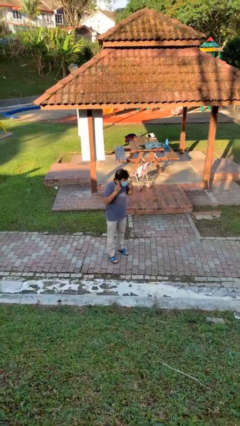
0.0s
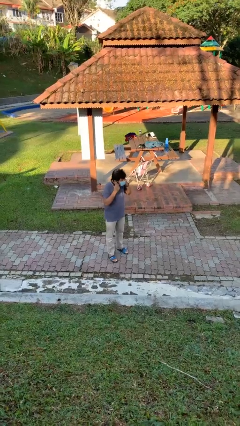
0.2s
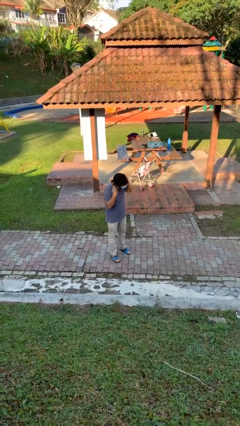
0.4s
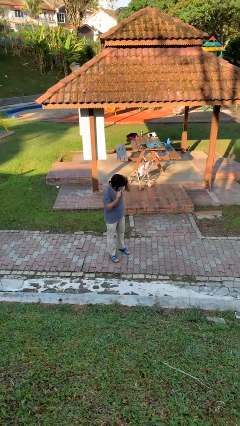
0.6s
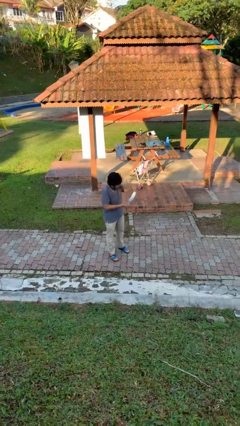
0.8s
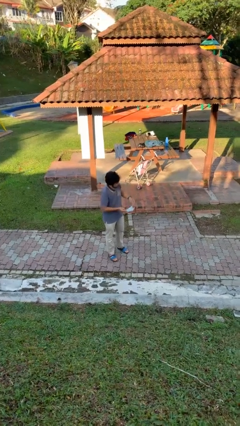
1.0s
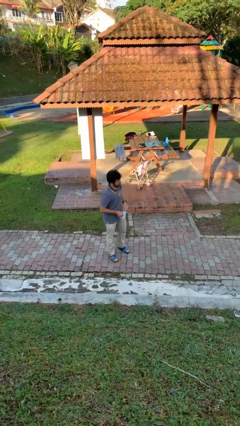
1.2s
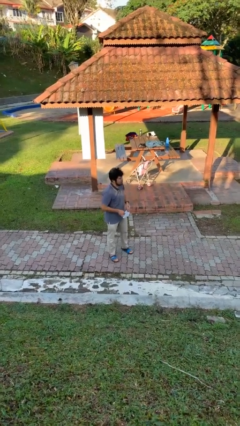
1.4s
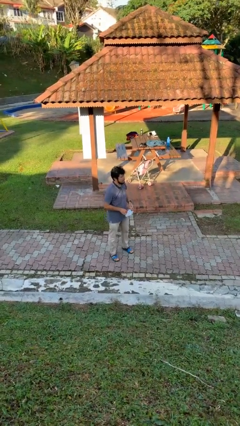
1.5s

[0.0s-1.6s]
person takes off facemask

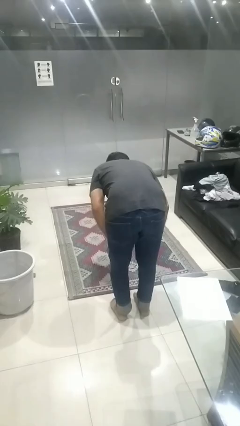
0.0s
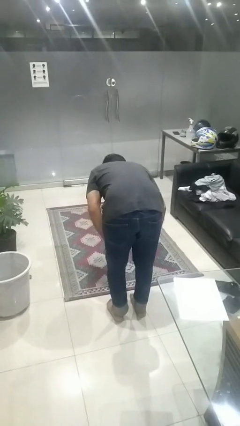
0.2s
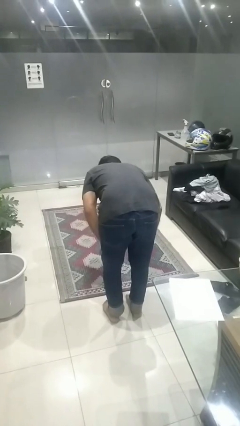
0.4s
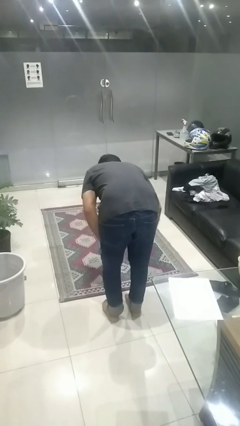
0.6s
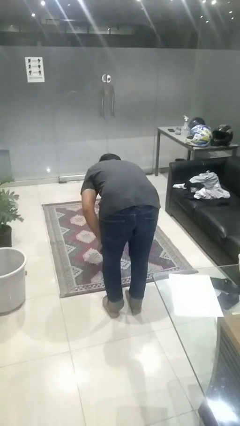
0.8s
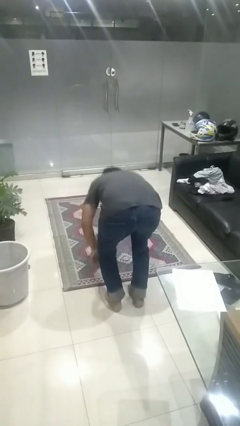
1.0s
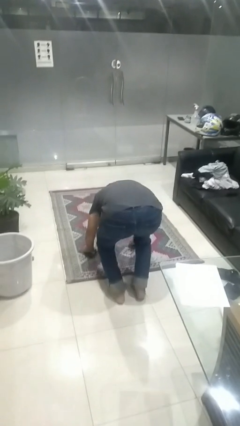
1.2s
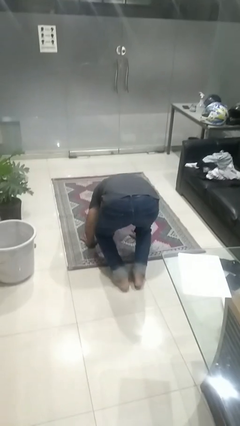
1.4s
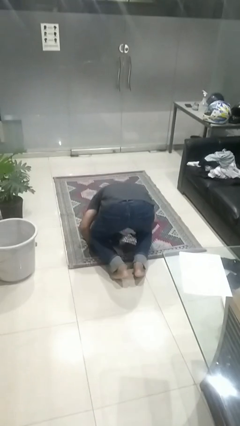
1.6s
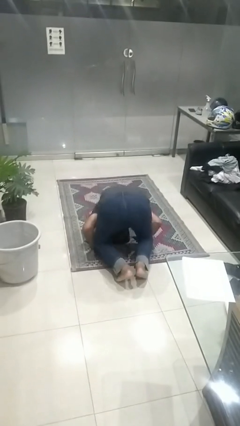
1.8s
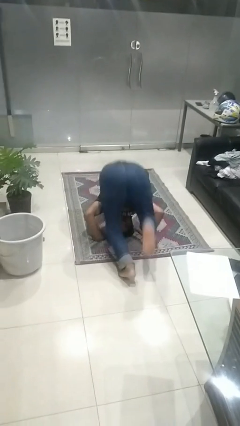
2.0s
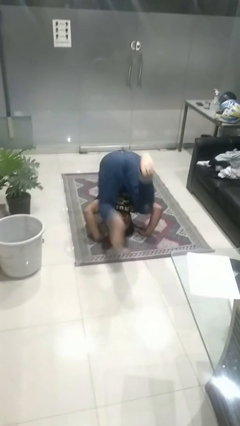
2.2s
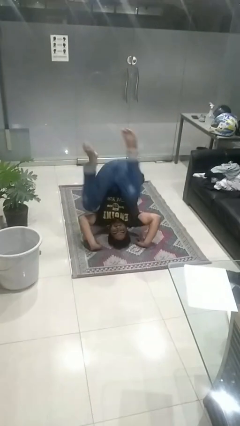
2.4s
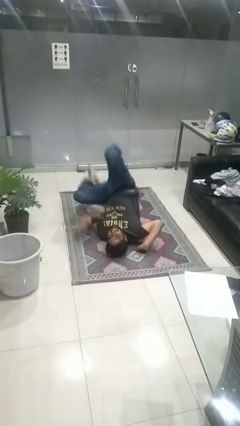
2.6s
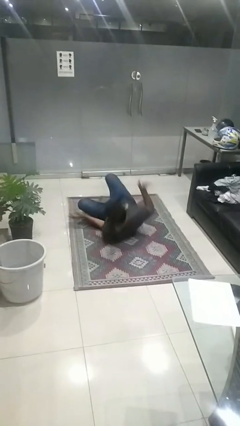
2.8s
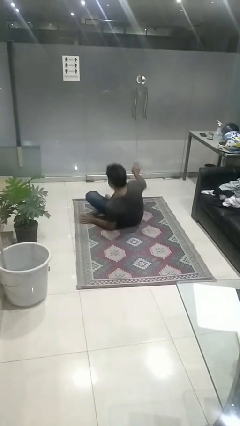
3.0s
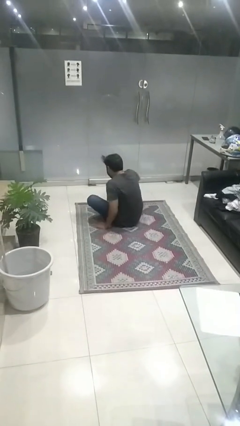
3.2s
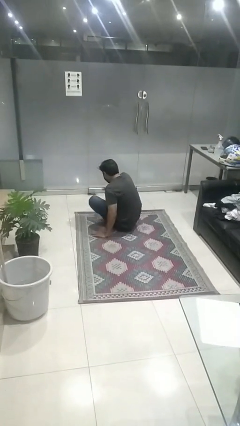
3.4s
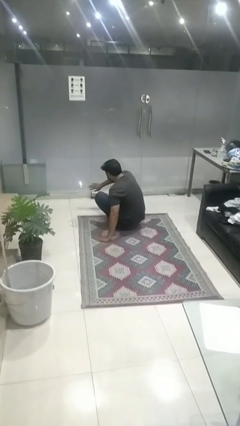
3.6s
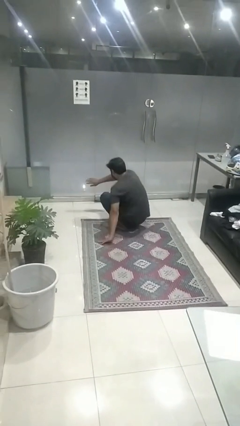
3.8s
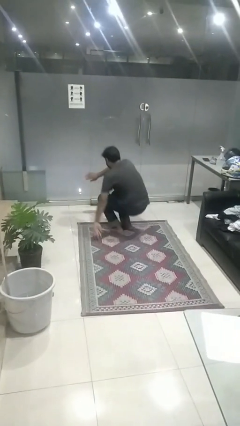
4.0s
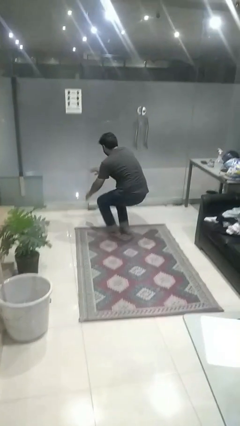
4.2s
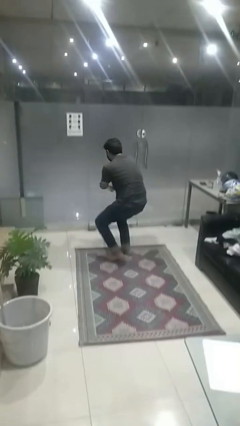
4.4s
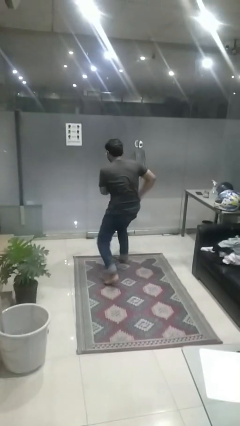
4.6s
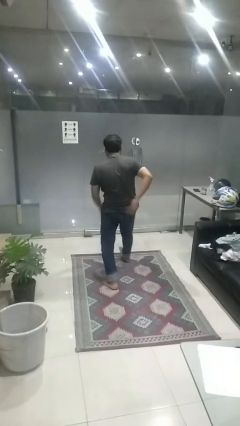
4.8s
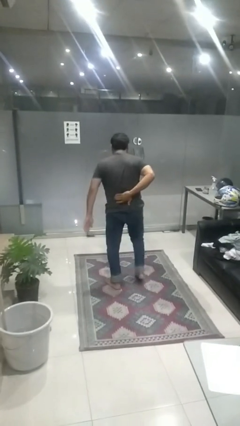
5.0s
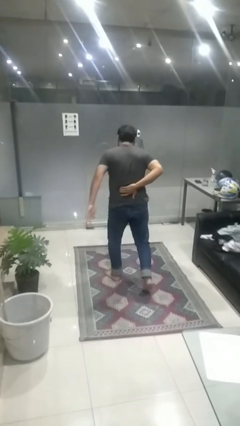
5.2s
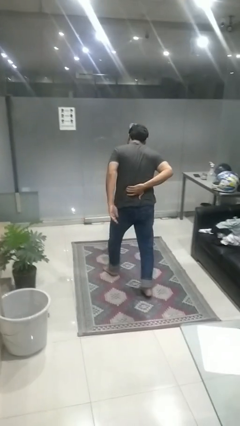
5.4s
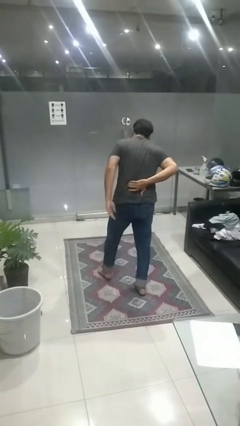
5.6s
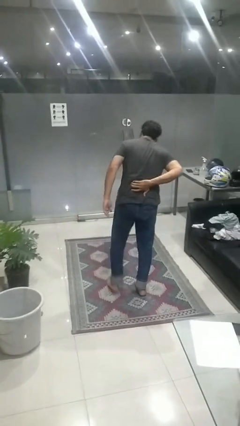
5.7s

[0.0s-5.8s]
person somersaults

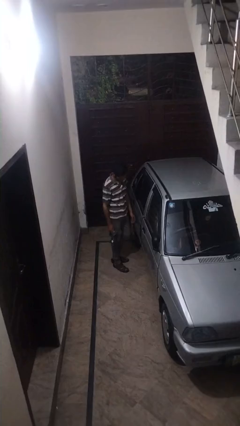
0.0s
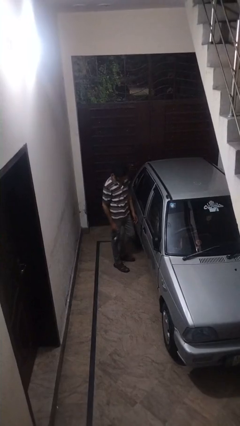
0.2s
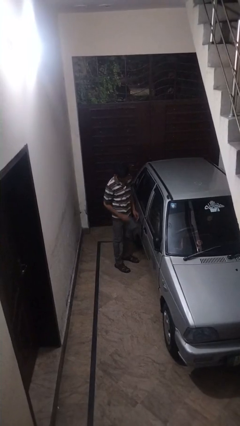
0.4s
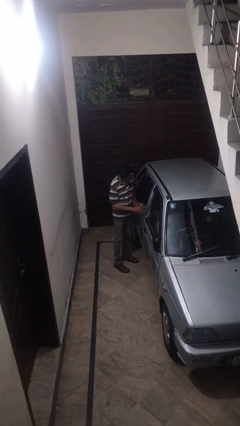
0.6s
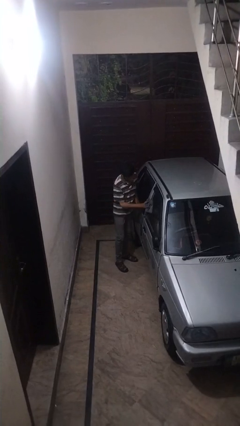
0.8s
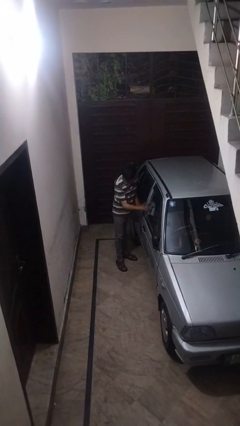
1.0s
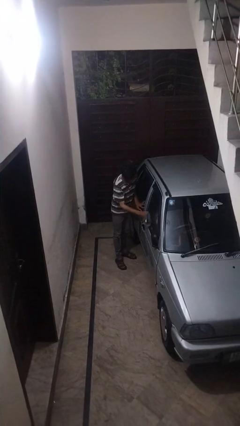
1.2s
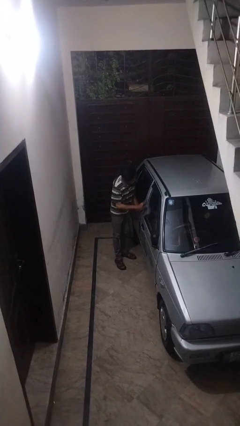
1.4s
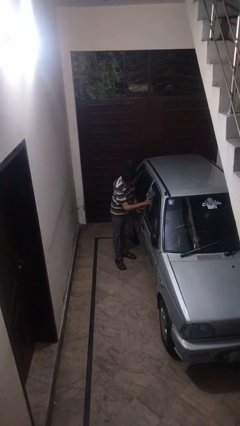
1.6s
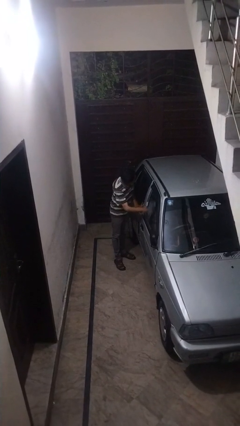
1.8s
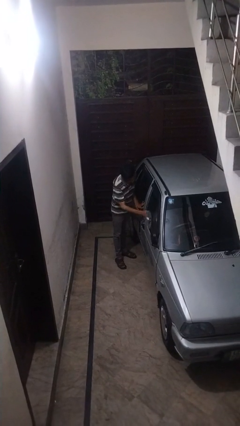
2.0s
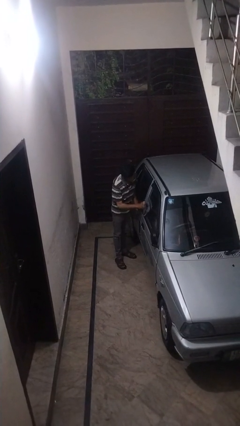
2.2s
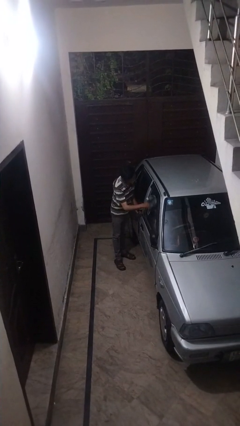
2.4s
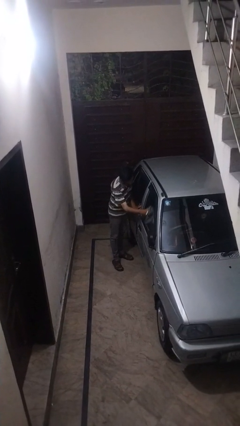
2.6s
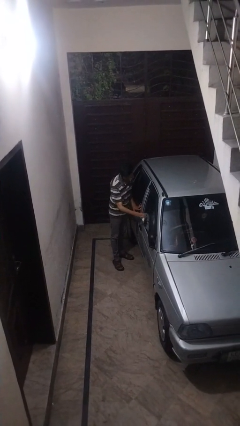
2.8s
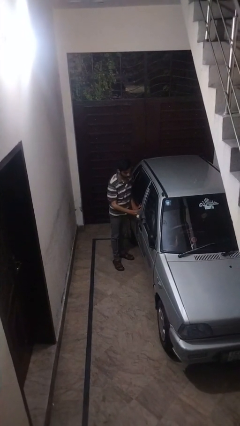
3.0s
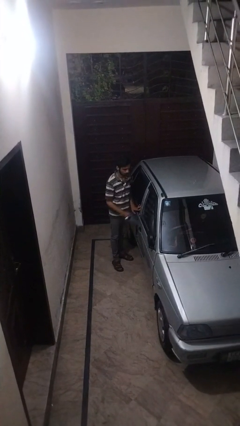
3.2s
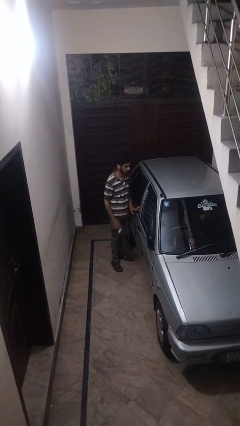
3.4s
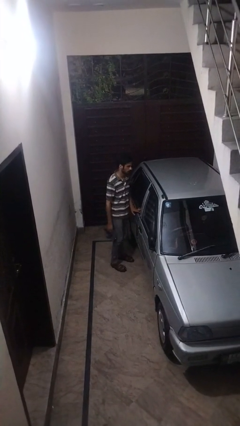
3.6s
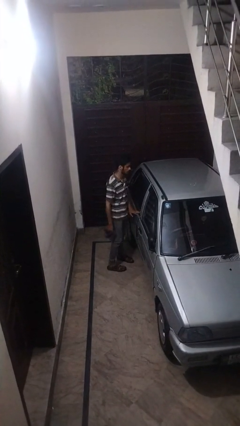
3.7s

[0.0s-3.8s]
person polishes car with rag

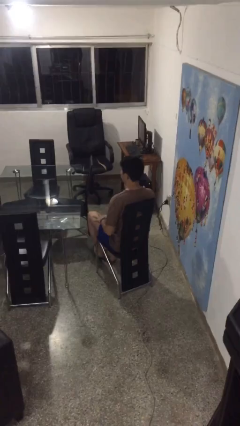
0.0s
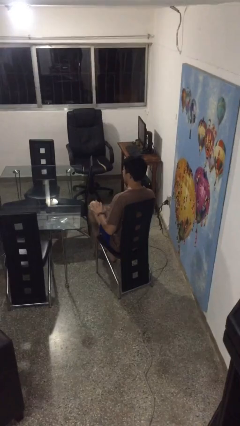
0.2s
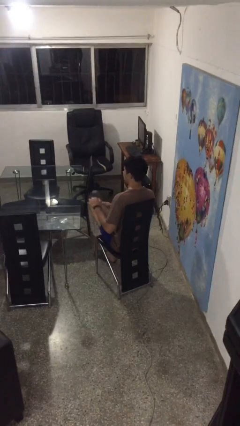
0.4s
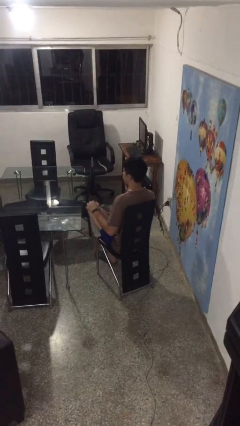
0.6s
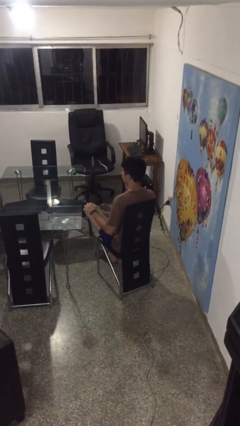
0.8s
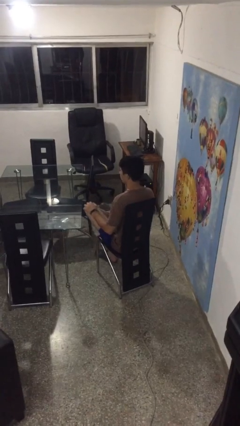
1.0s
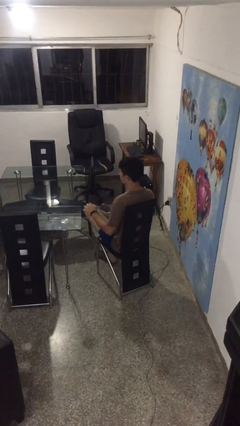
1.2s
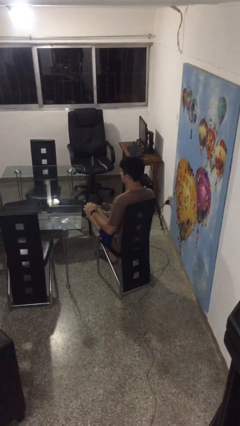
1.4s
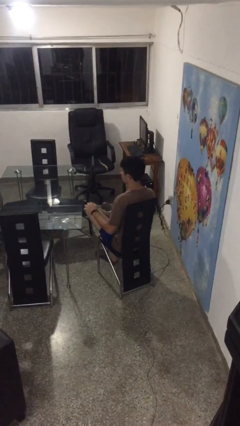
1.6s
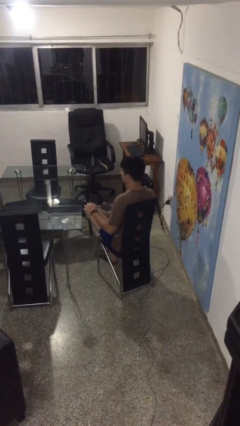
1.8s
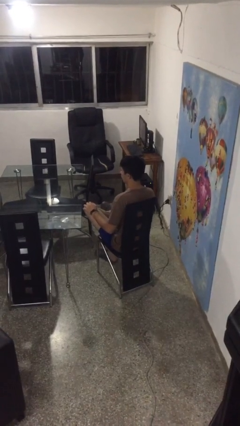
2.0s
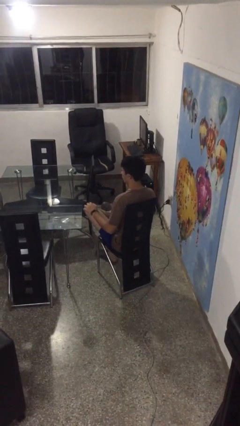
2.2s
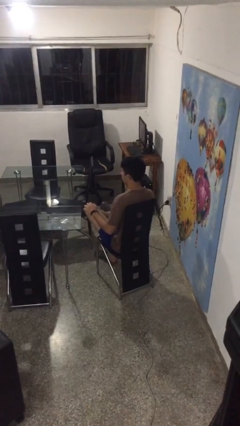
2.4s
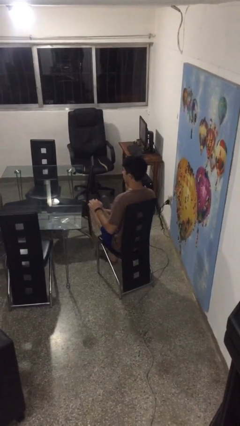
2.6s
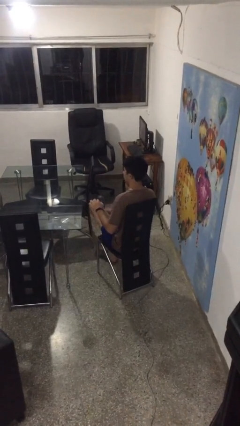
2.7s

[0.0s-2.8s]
person crosses legs

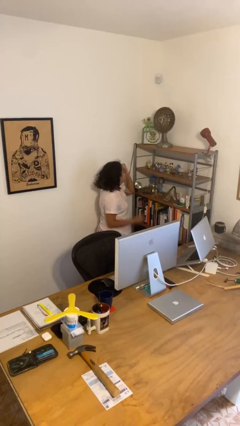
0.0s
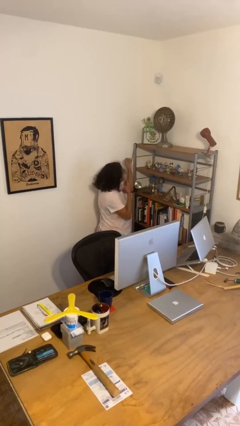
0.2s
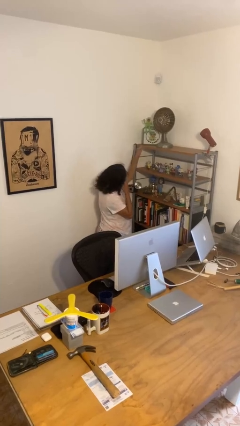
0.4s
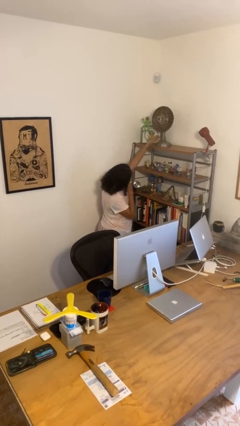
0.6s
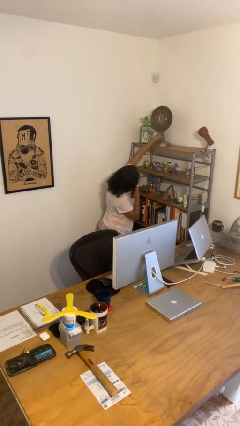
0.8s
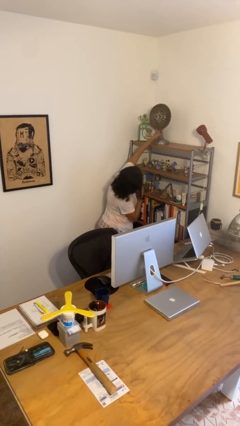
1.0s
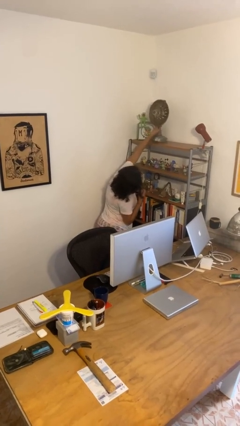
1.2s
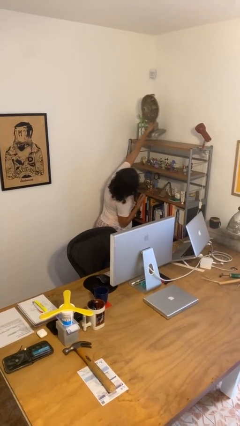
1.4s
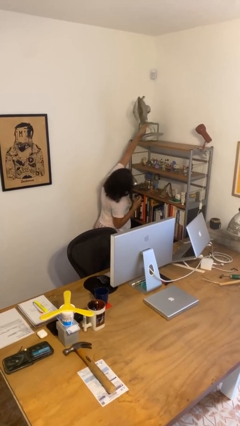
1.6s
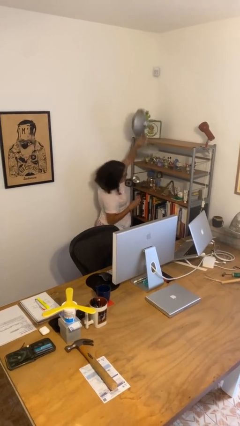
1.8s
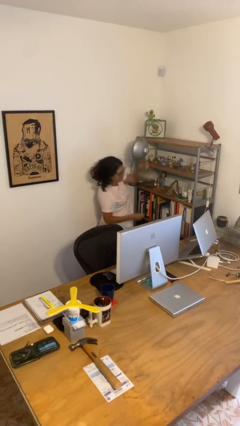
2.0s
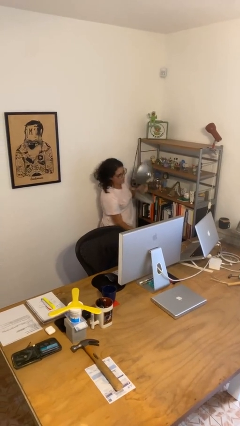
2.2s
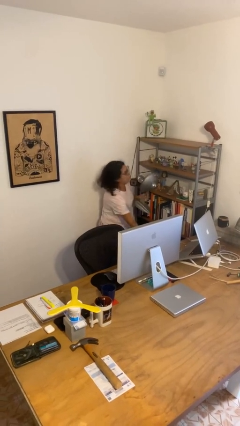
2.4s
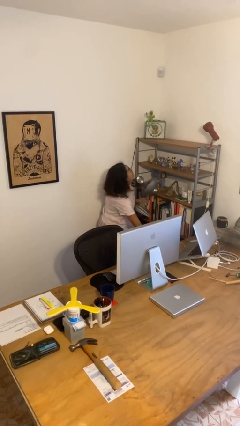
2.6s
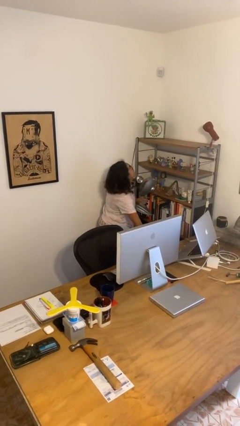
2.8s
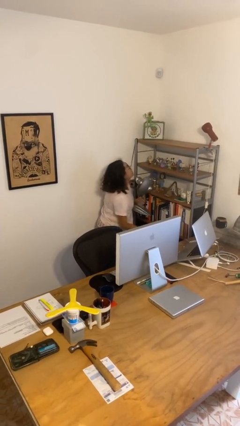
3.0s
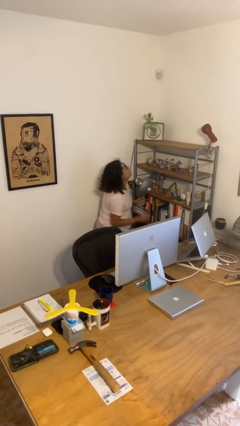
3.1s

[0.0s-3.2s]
person picks up object from shelf

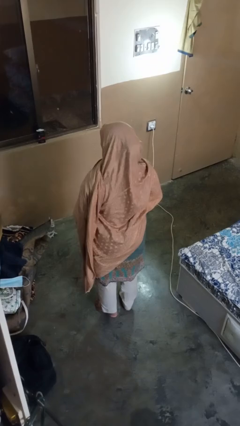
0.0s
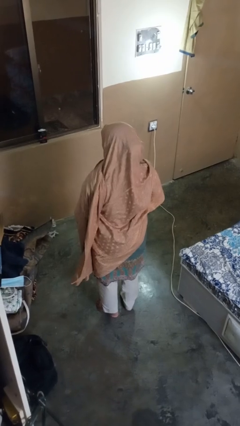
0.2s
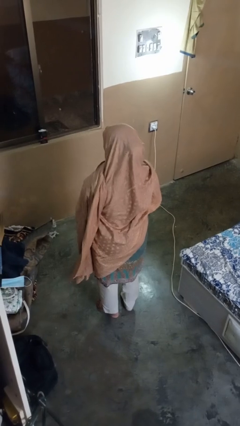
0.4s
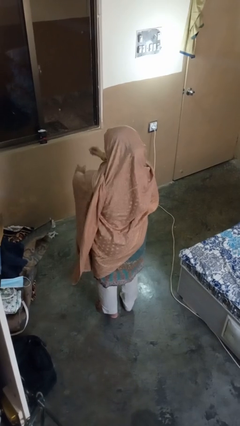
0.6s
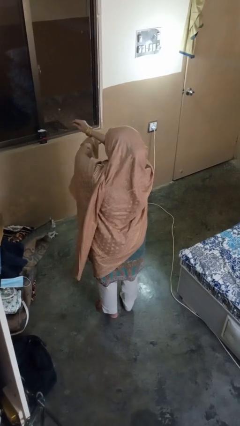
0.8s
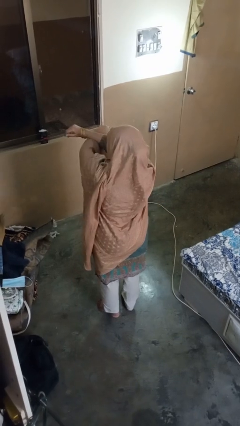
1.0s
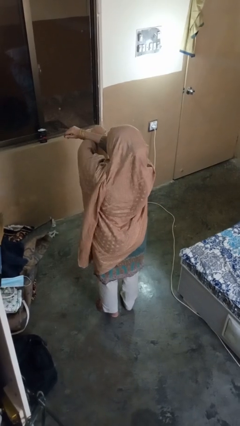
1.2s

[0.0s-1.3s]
person crosses arms
